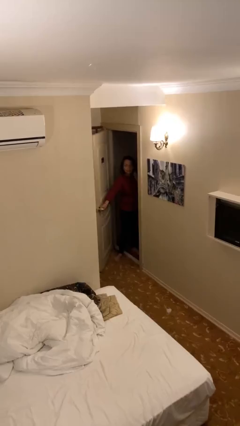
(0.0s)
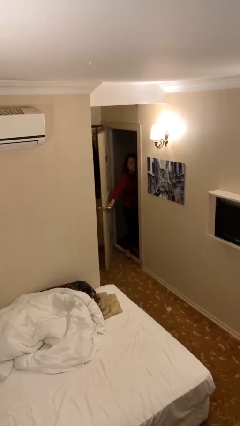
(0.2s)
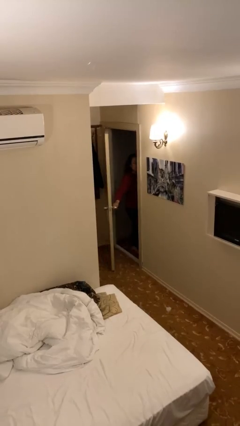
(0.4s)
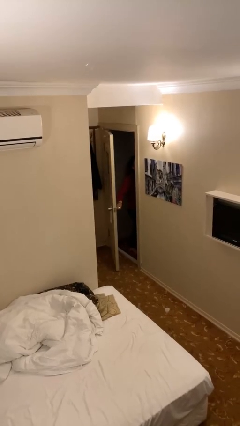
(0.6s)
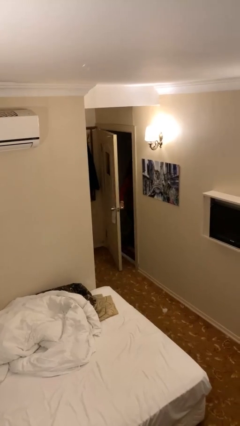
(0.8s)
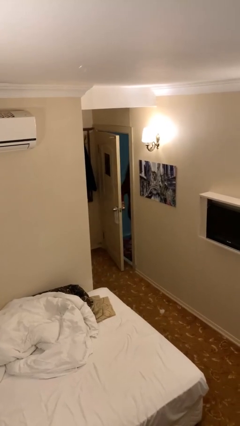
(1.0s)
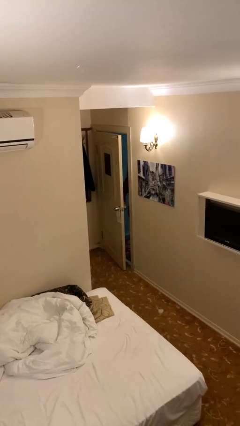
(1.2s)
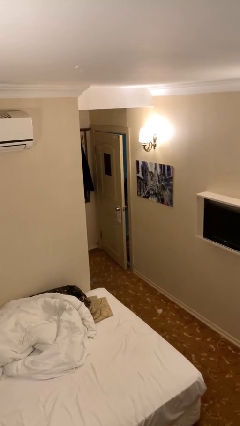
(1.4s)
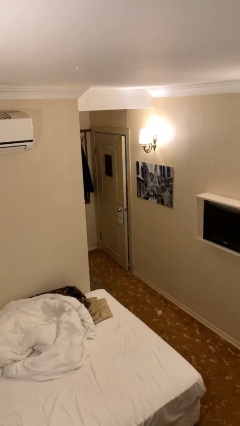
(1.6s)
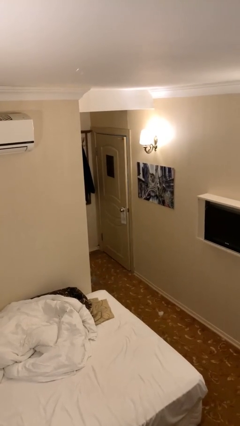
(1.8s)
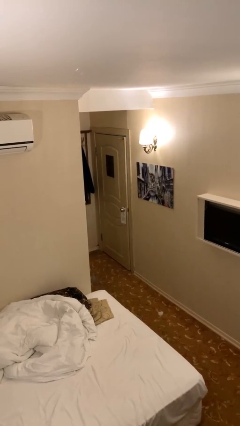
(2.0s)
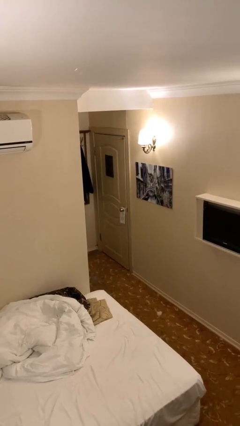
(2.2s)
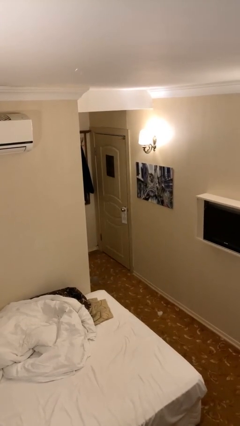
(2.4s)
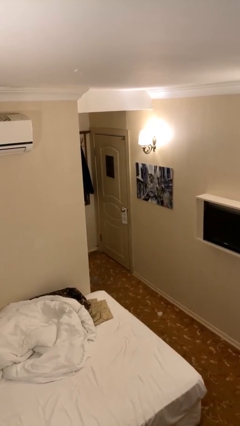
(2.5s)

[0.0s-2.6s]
person closes facility door

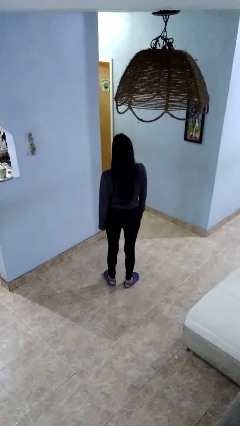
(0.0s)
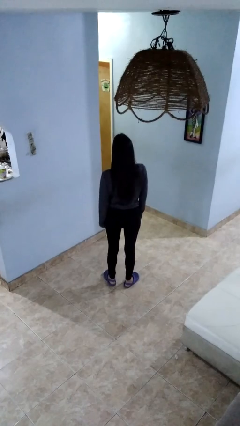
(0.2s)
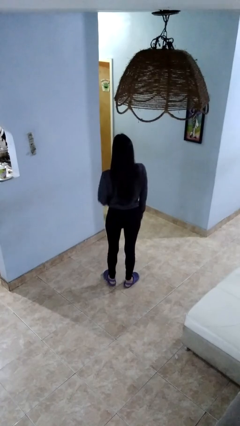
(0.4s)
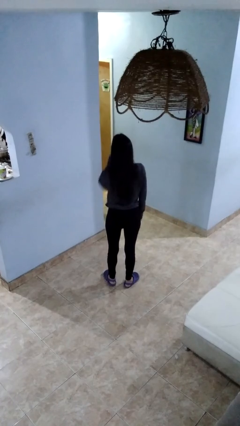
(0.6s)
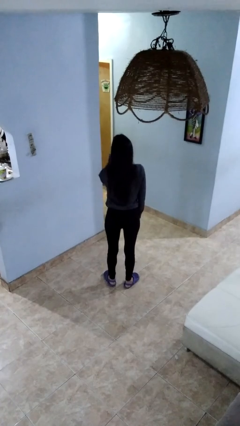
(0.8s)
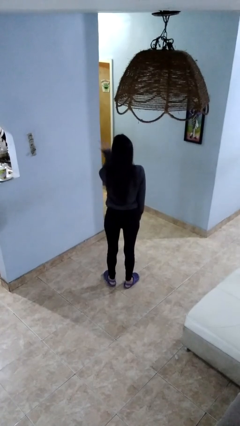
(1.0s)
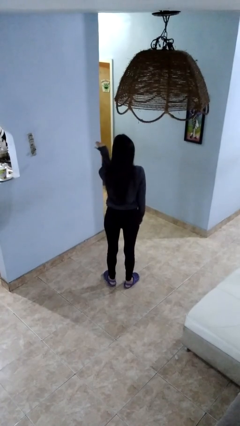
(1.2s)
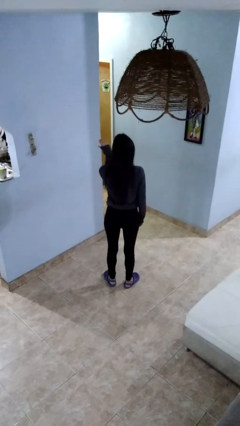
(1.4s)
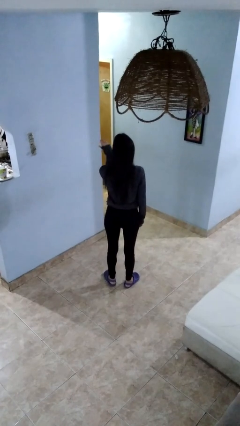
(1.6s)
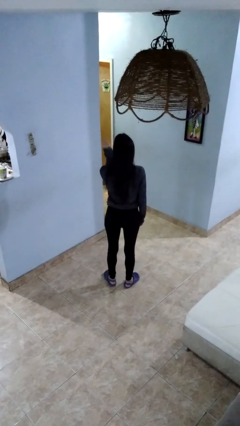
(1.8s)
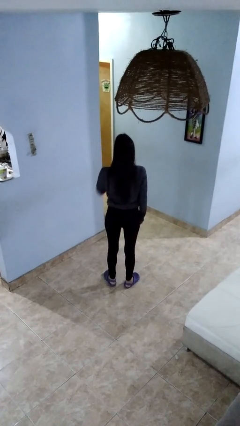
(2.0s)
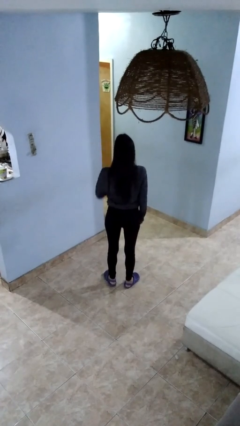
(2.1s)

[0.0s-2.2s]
person gestures blow kiss

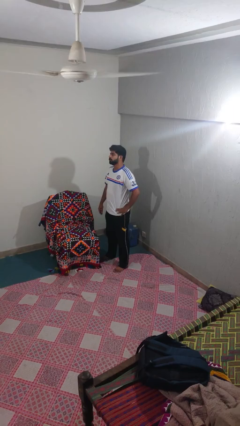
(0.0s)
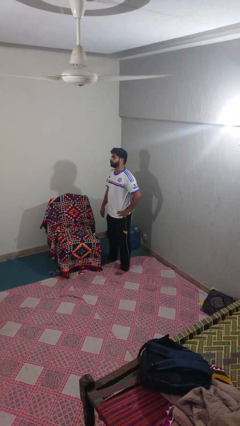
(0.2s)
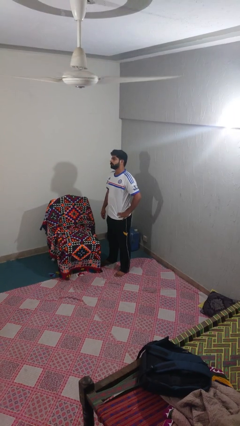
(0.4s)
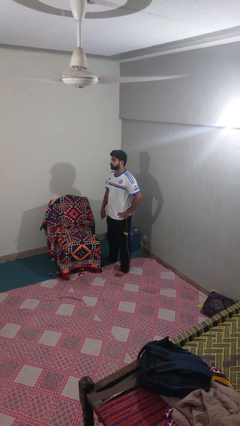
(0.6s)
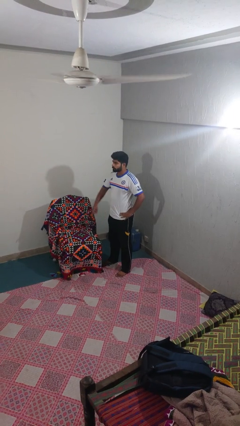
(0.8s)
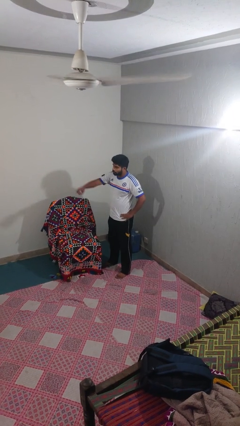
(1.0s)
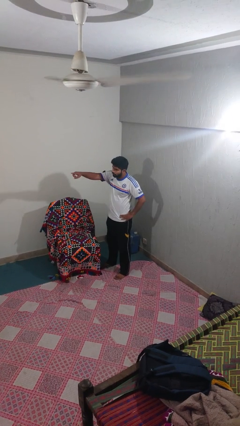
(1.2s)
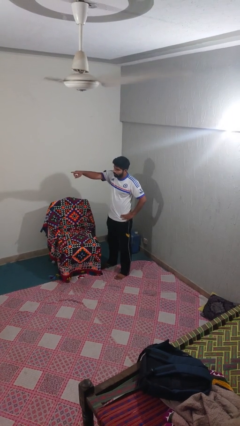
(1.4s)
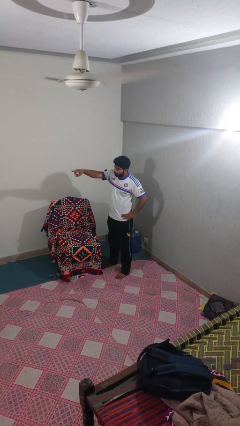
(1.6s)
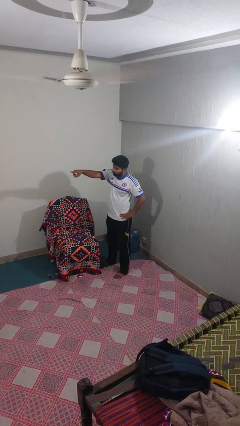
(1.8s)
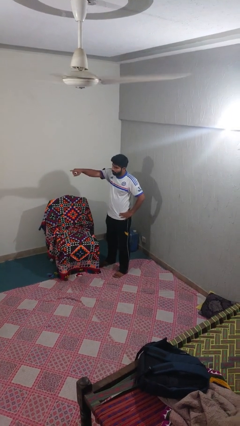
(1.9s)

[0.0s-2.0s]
person points at person

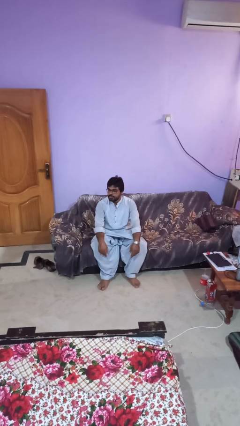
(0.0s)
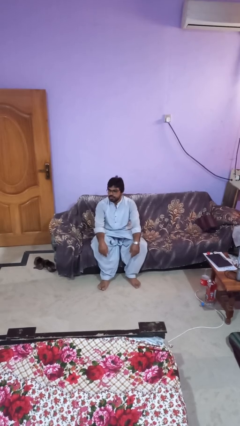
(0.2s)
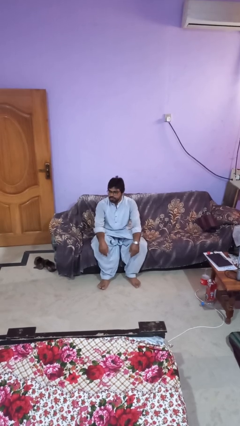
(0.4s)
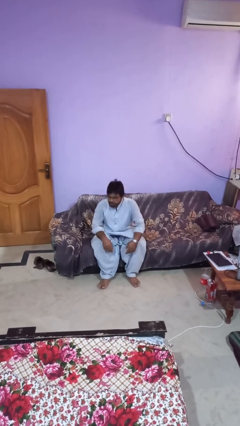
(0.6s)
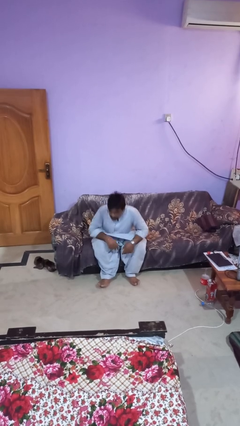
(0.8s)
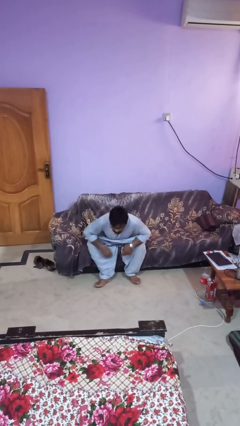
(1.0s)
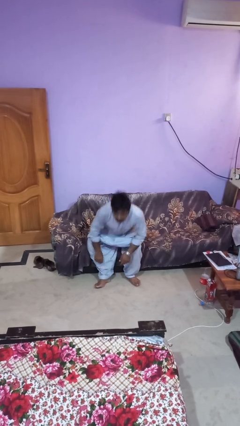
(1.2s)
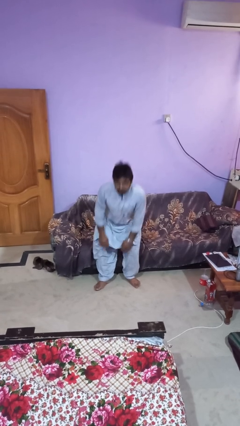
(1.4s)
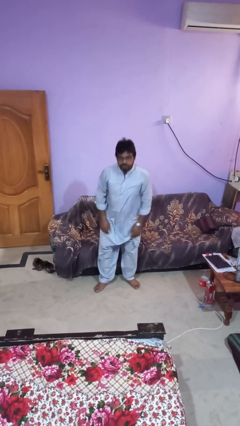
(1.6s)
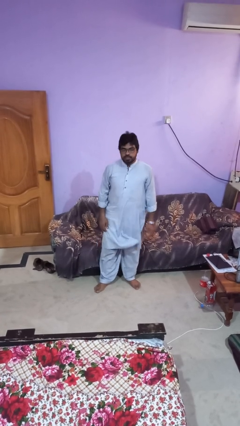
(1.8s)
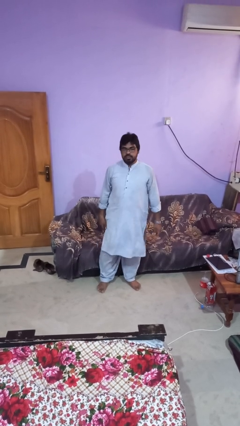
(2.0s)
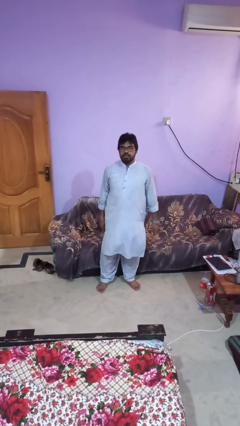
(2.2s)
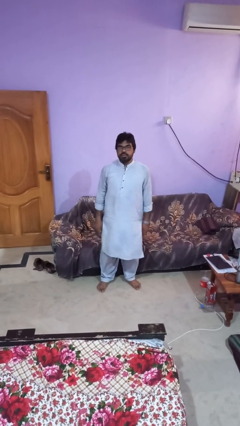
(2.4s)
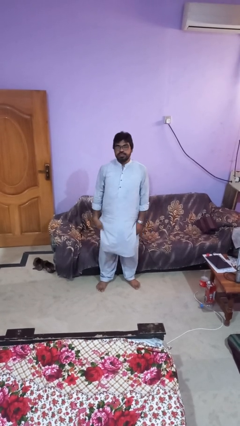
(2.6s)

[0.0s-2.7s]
person stands up

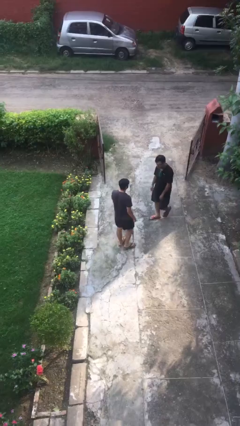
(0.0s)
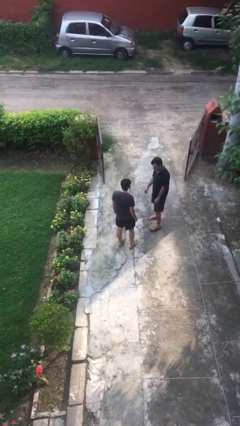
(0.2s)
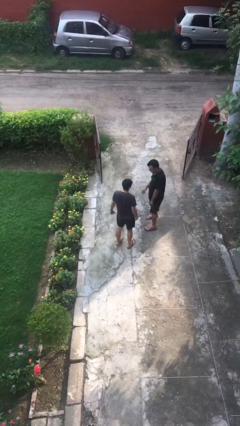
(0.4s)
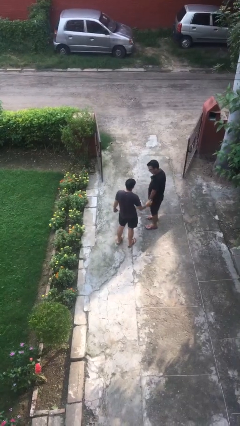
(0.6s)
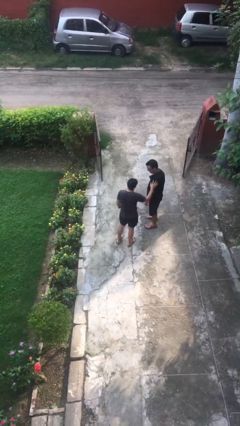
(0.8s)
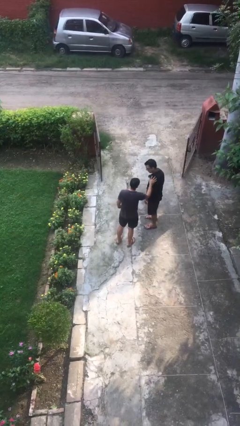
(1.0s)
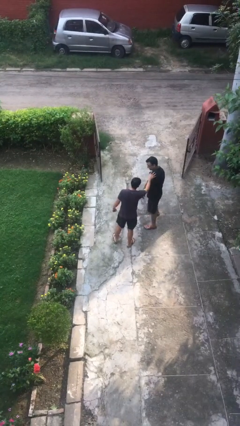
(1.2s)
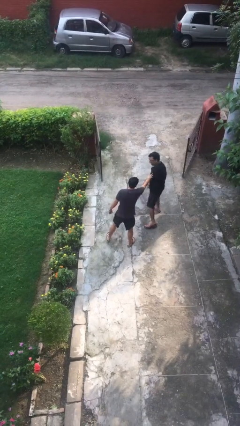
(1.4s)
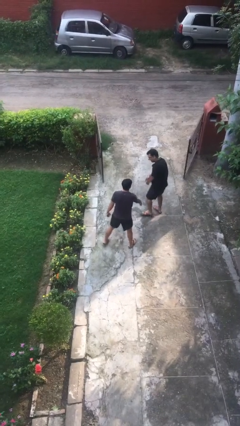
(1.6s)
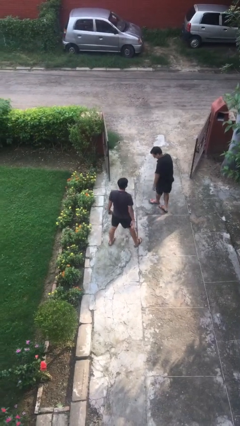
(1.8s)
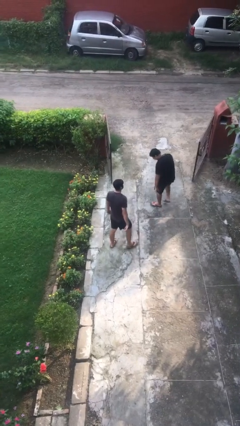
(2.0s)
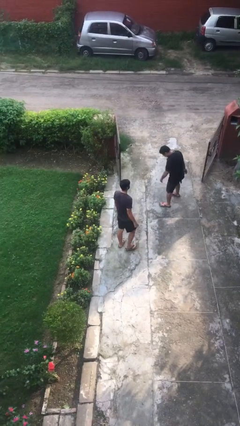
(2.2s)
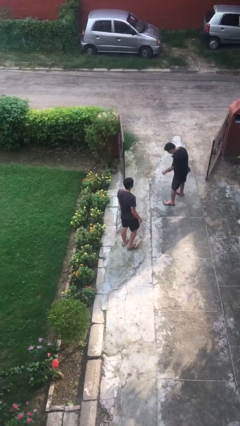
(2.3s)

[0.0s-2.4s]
person shoves person

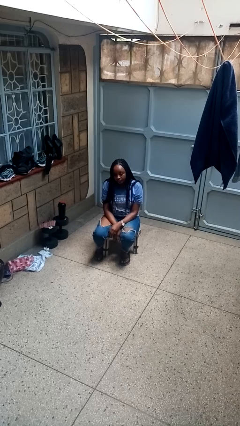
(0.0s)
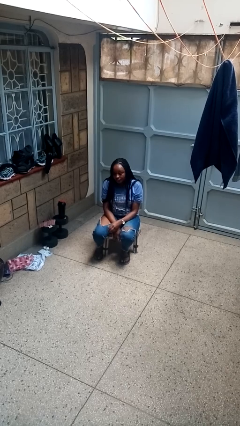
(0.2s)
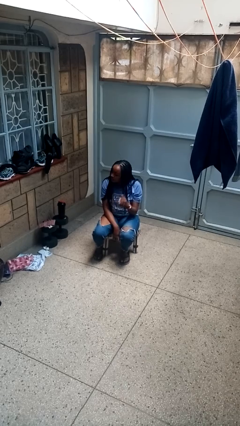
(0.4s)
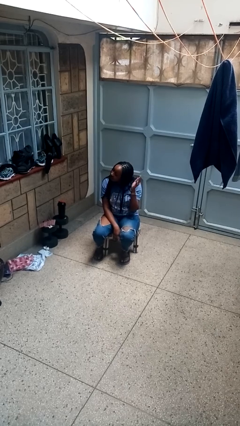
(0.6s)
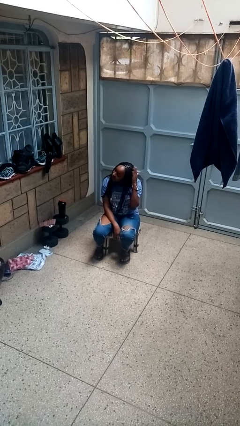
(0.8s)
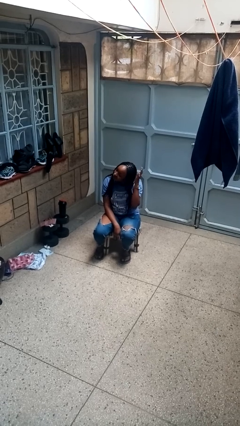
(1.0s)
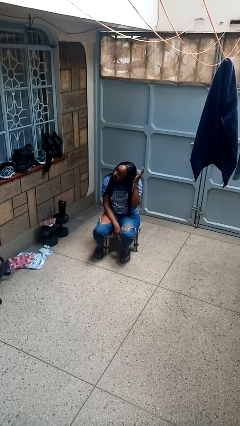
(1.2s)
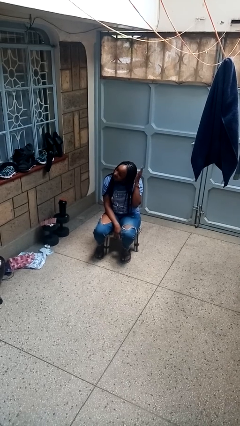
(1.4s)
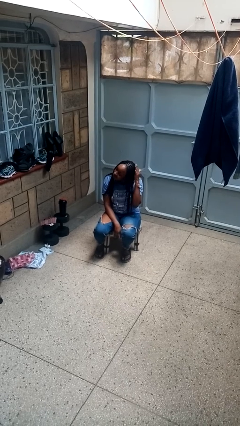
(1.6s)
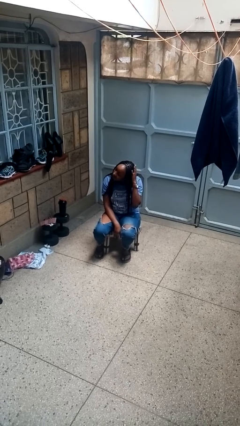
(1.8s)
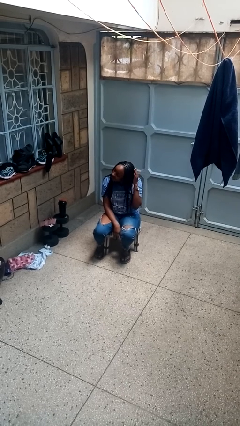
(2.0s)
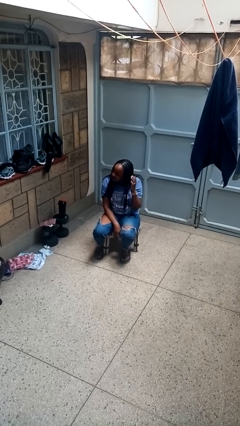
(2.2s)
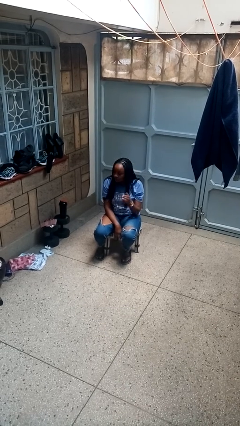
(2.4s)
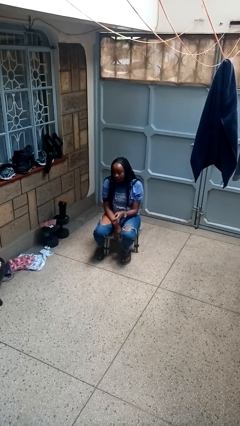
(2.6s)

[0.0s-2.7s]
person pats head

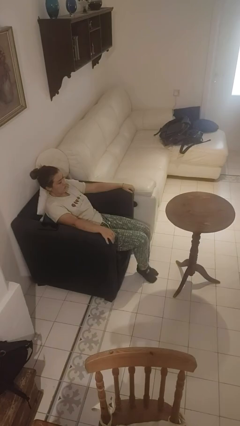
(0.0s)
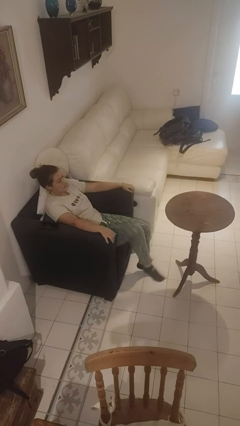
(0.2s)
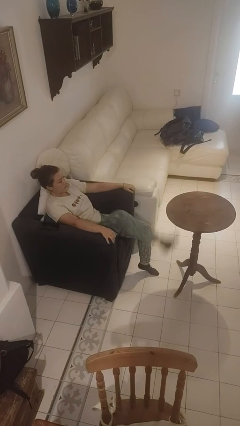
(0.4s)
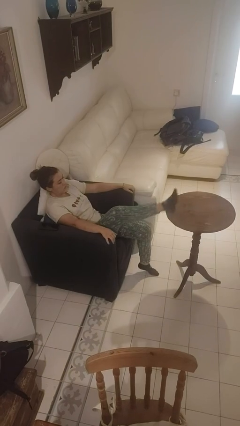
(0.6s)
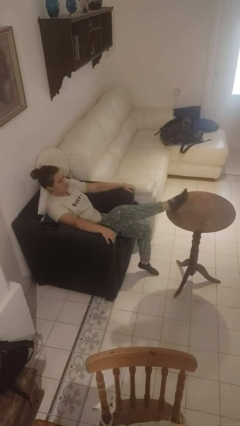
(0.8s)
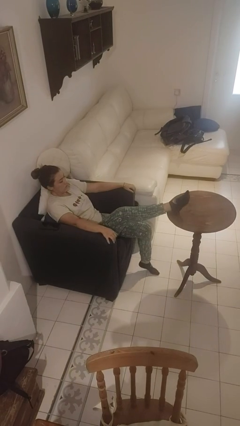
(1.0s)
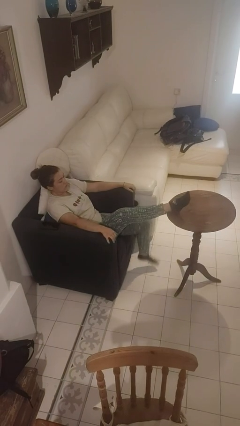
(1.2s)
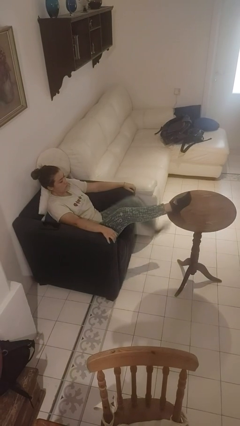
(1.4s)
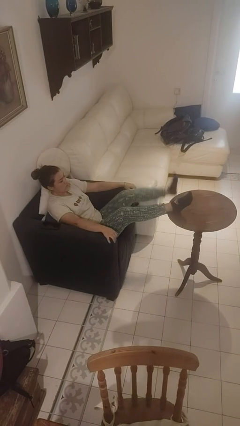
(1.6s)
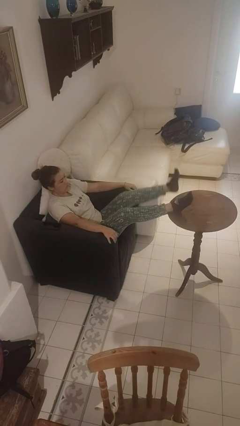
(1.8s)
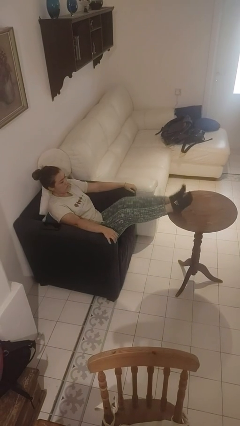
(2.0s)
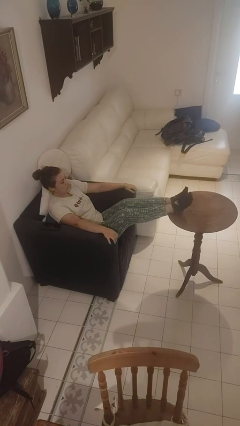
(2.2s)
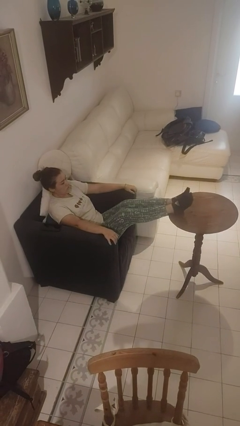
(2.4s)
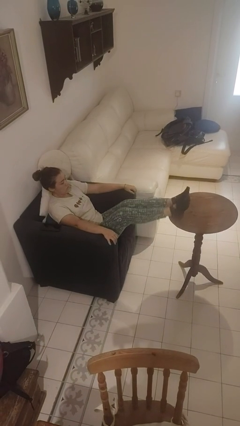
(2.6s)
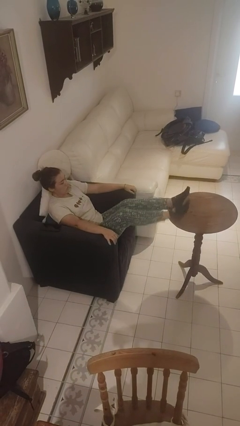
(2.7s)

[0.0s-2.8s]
person puts feet up

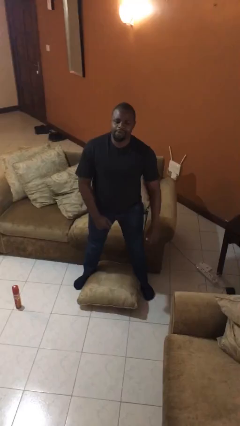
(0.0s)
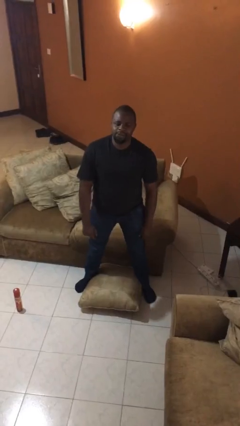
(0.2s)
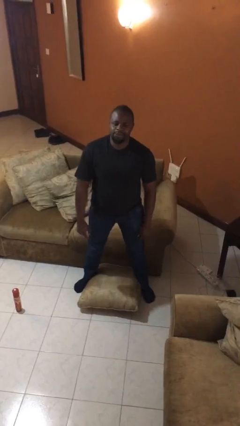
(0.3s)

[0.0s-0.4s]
person sits down
